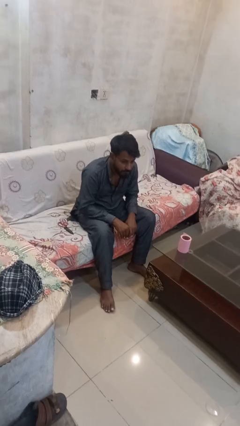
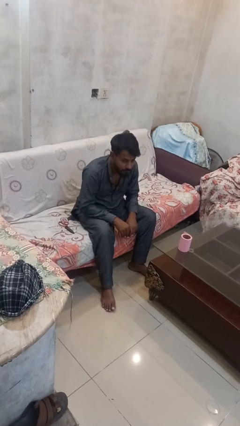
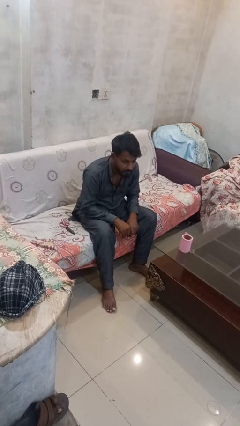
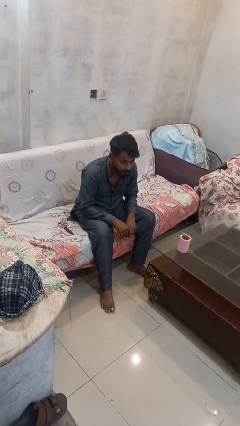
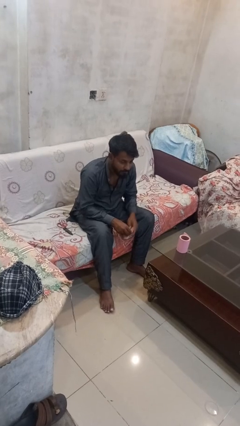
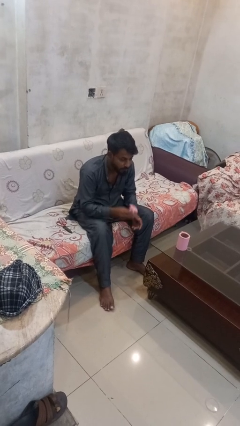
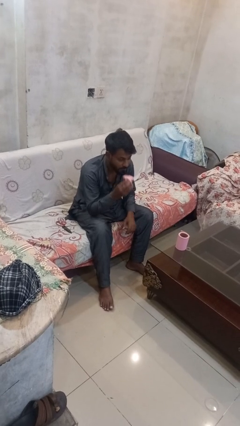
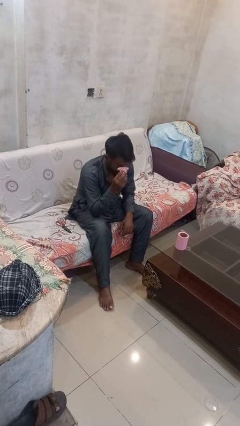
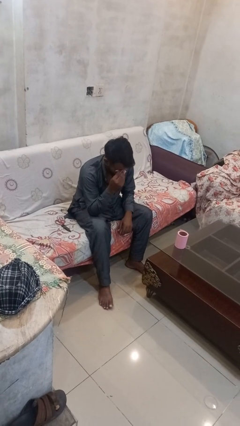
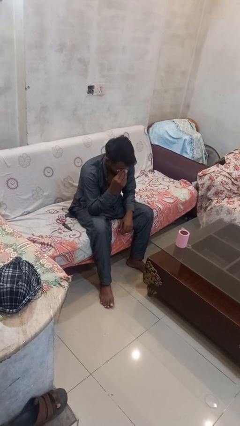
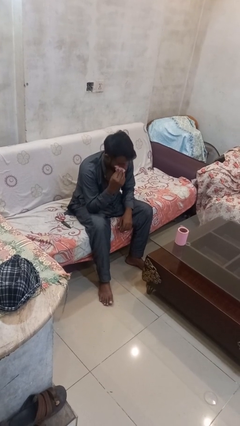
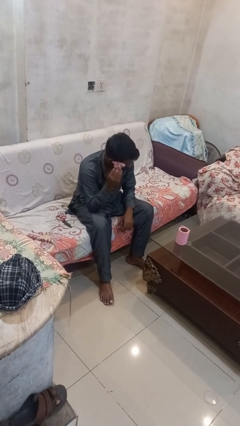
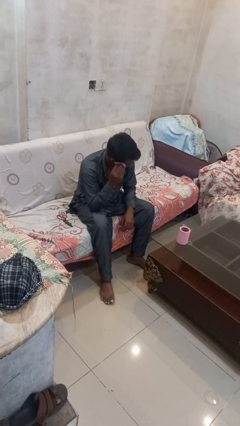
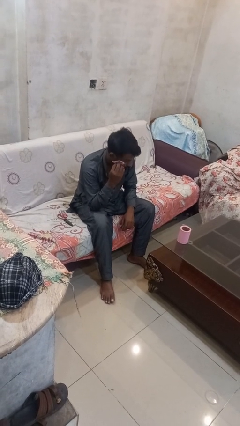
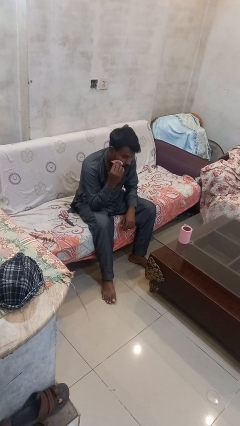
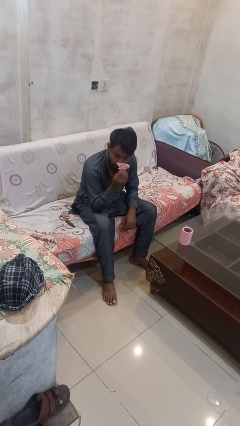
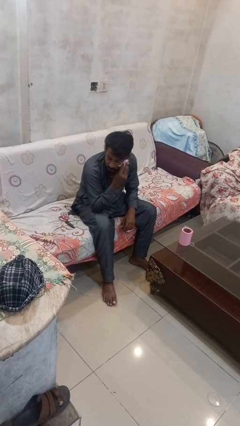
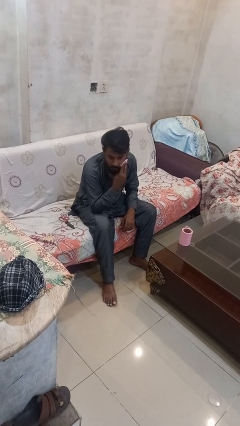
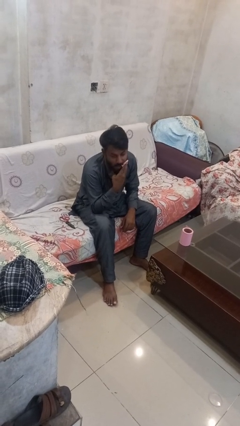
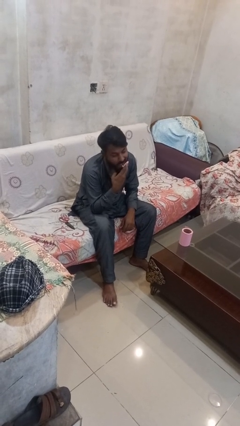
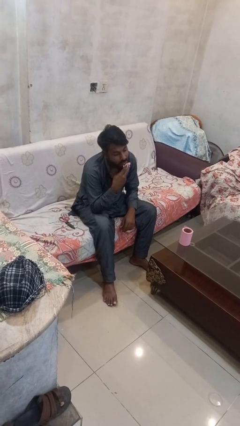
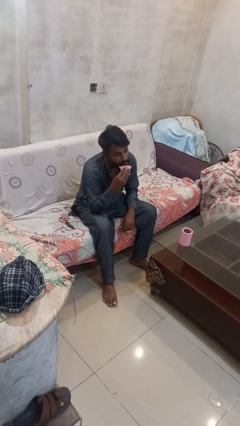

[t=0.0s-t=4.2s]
person wipes mouth with napkin

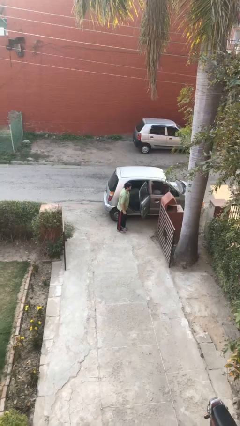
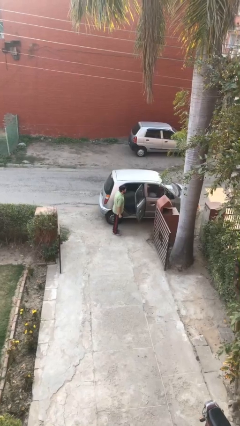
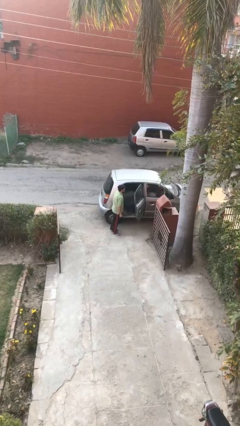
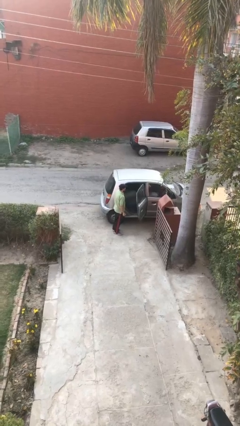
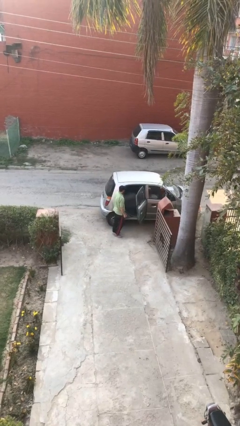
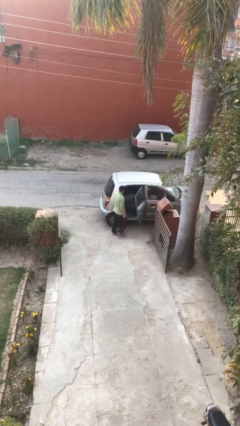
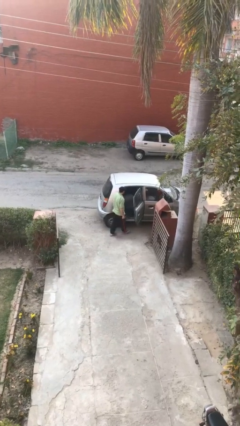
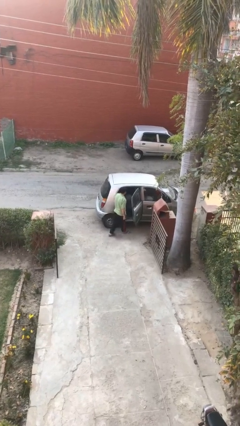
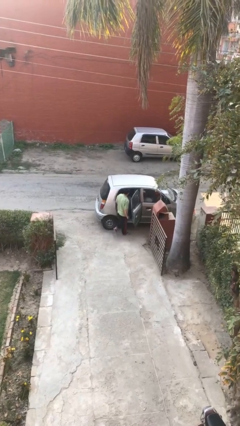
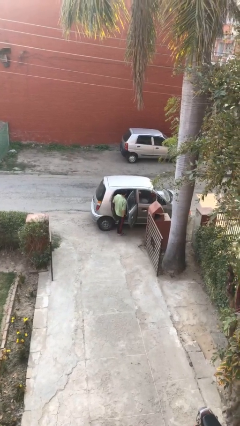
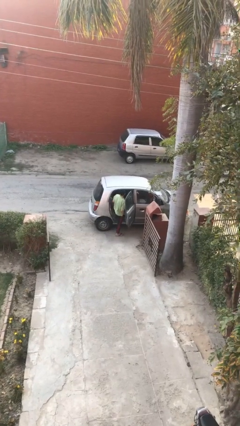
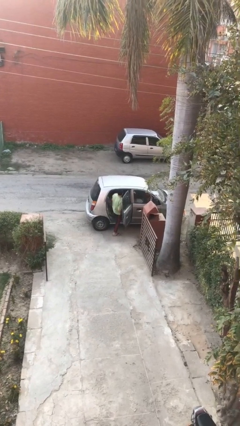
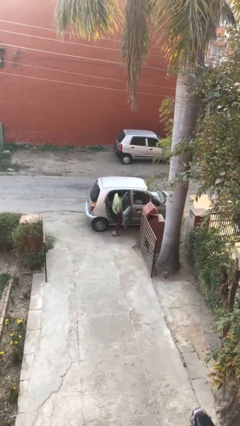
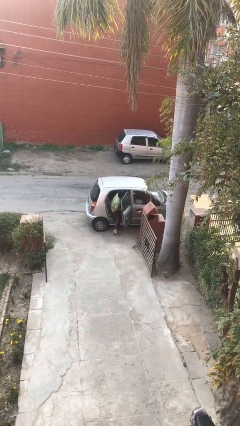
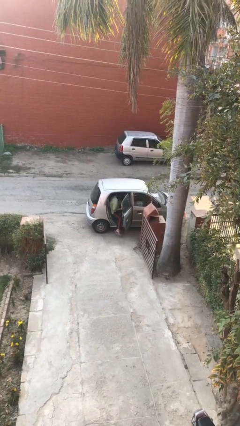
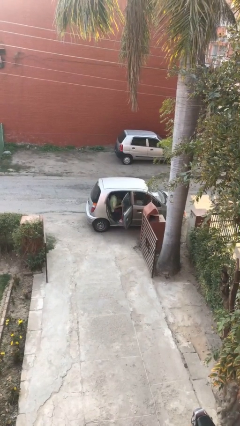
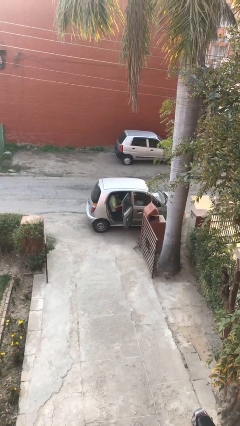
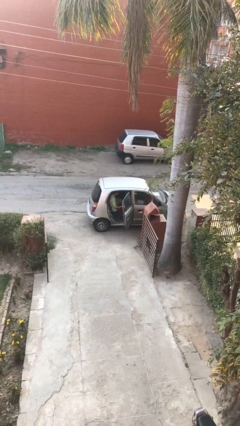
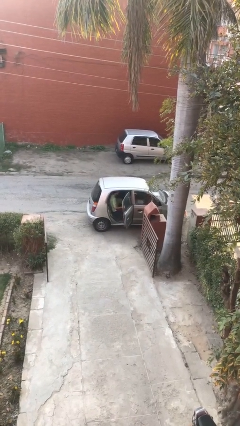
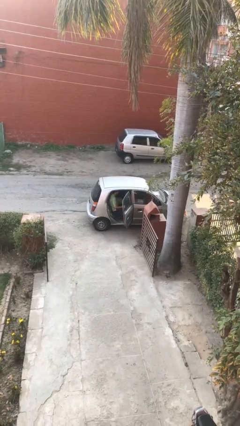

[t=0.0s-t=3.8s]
person enters car

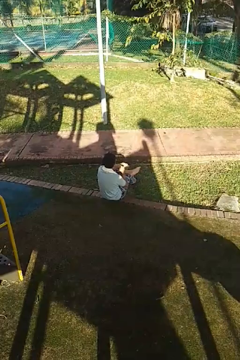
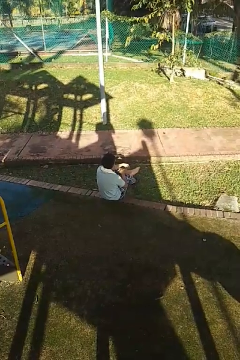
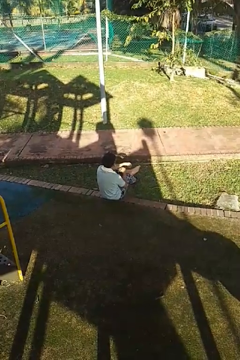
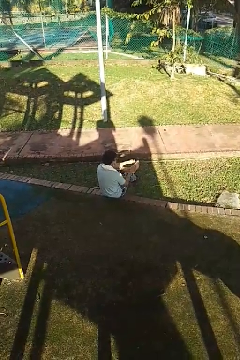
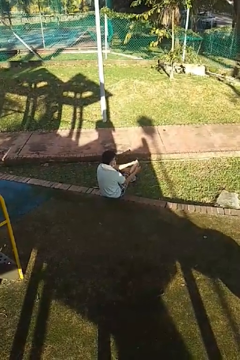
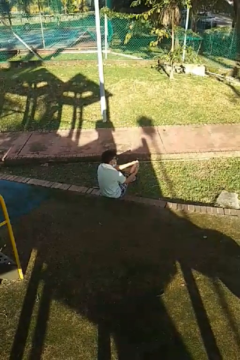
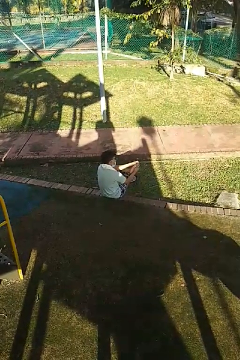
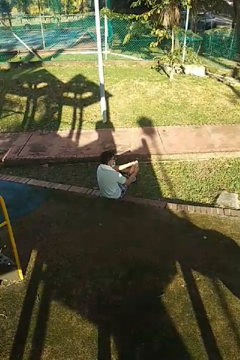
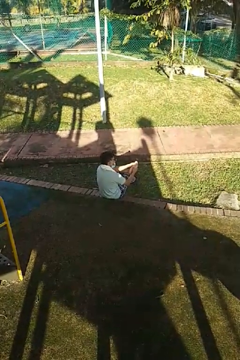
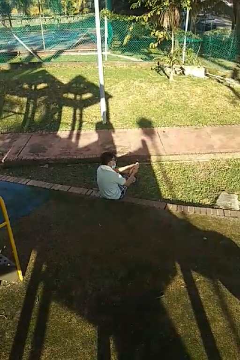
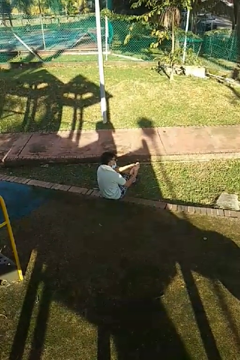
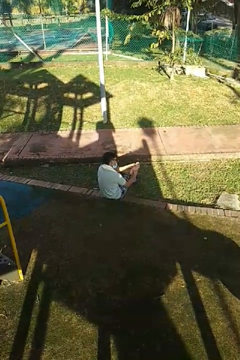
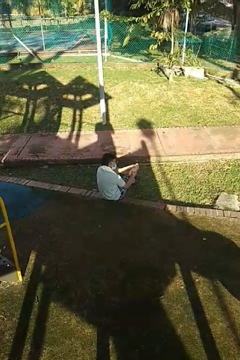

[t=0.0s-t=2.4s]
person rubs foot

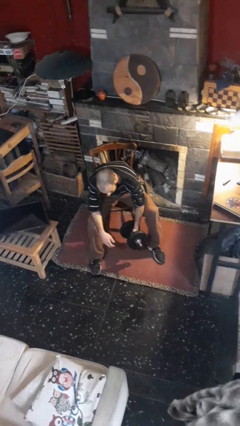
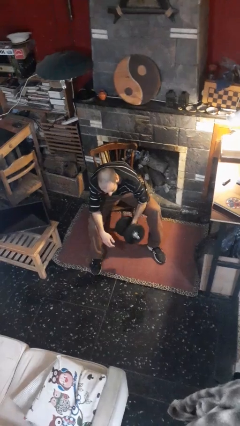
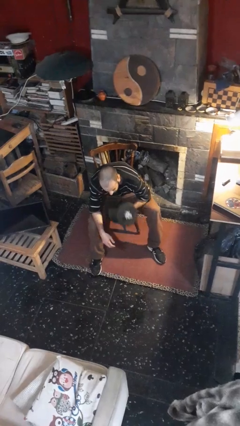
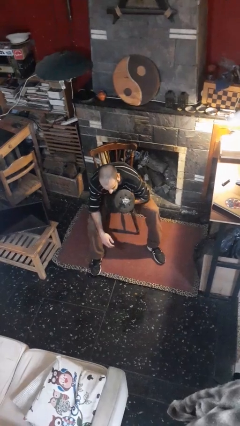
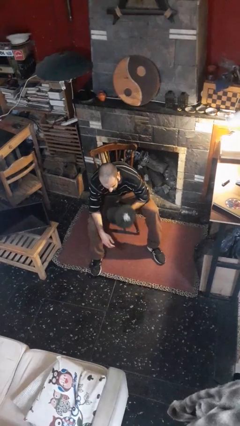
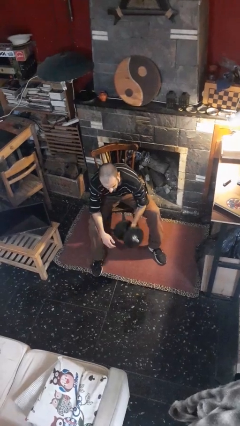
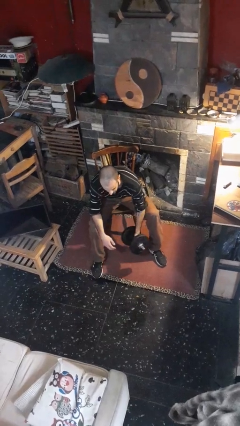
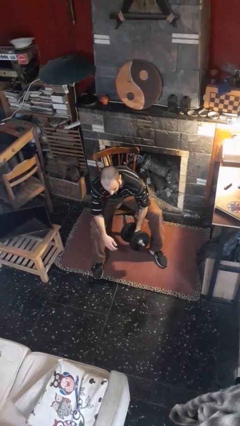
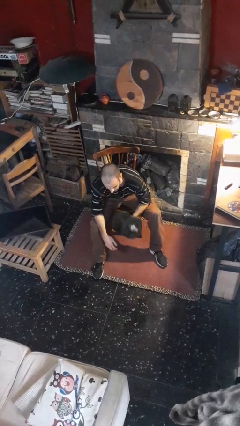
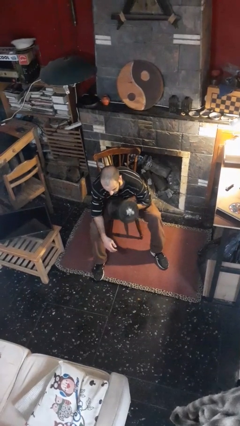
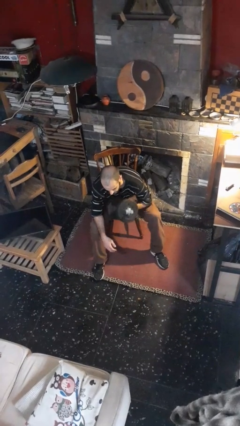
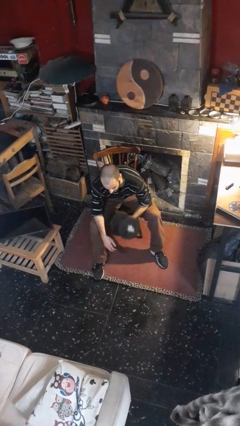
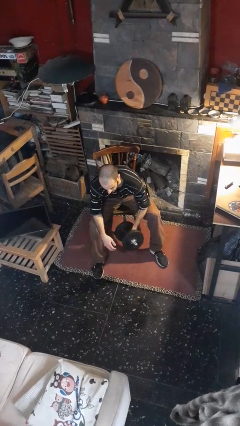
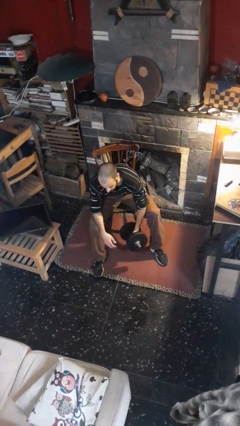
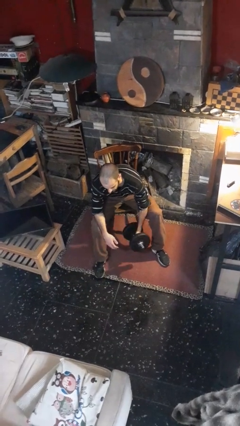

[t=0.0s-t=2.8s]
person lifts dumbbells

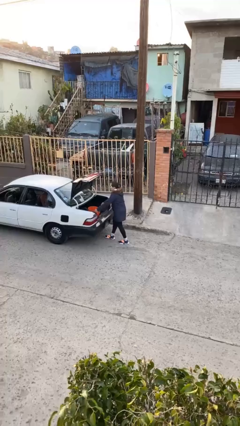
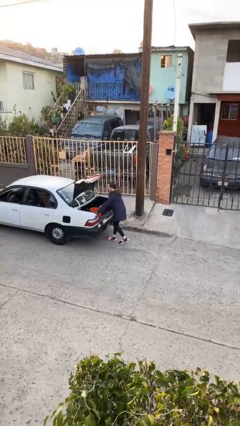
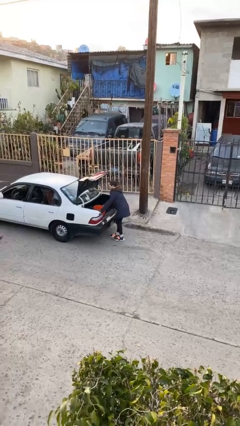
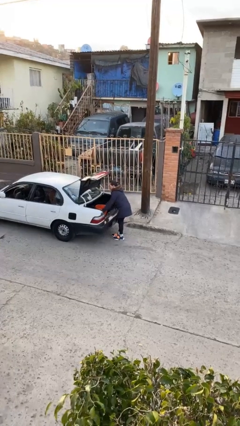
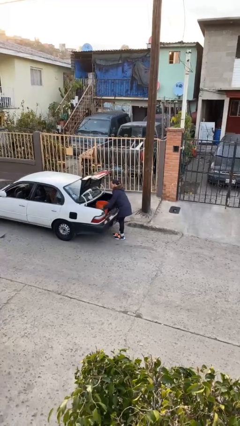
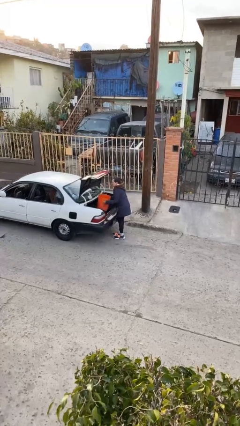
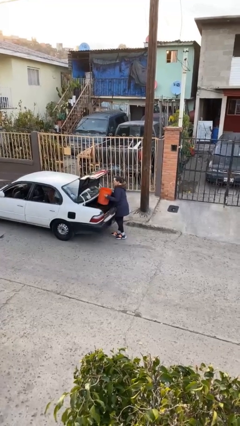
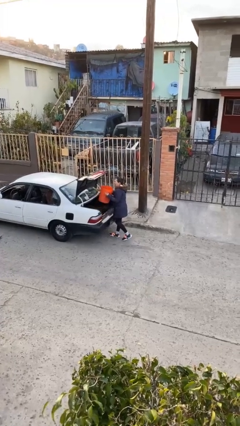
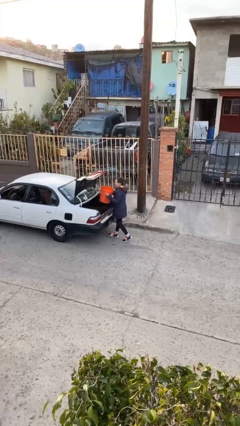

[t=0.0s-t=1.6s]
person unloads car

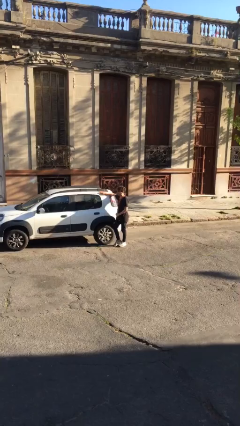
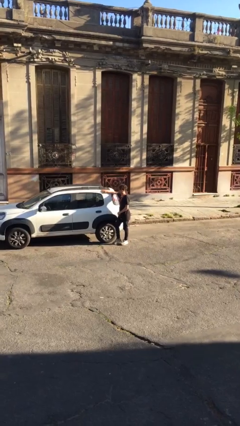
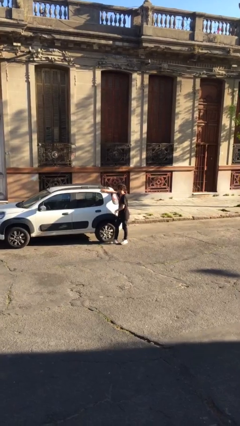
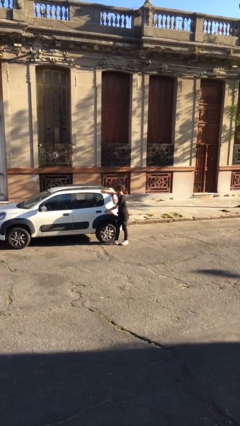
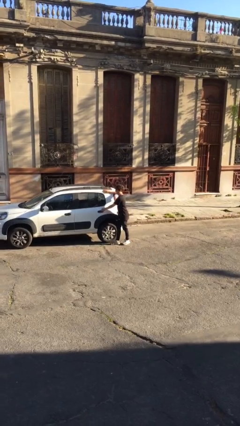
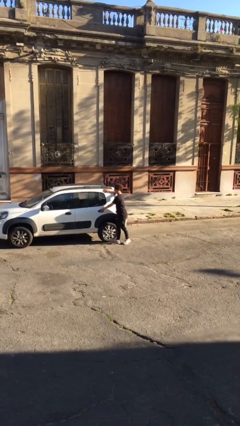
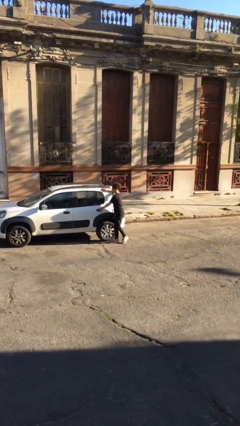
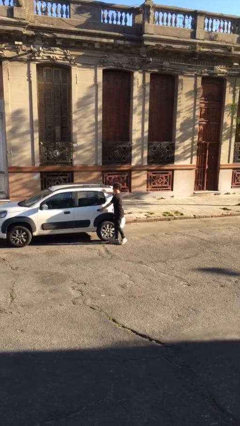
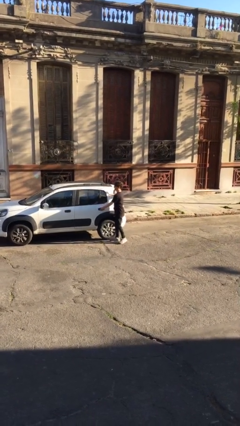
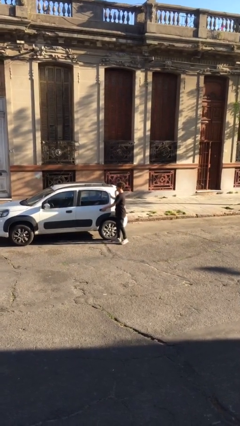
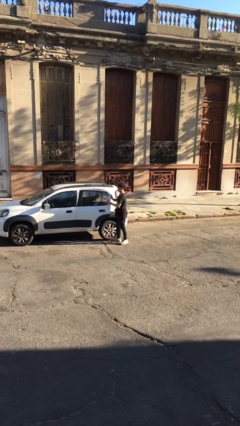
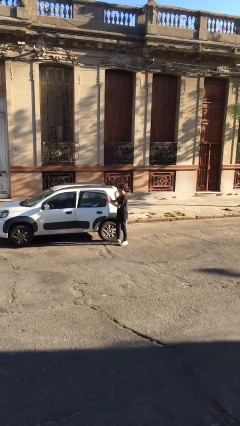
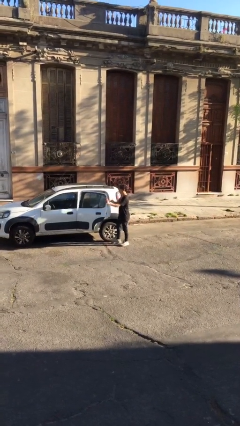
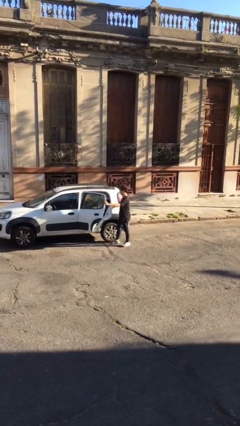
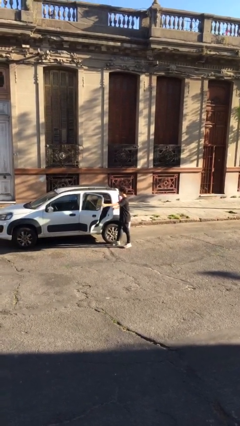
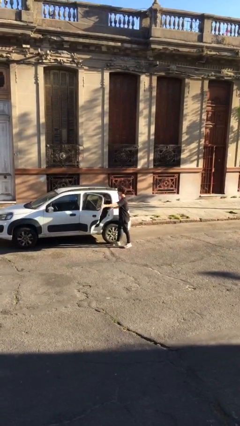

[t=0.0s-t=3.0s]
person opens car door
